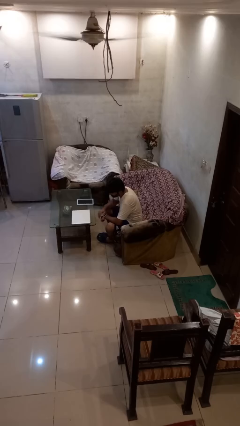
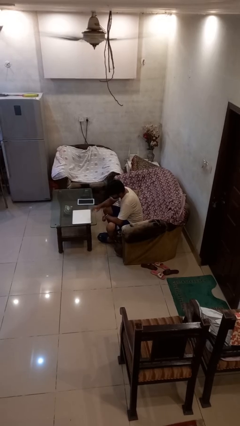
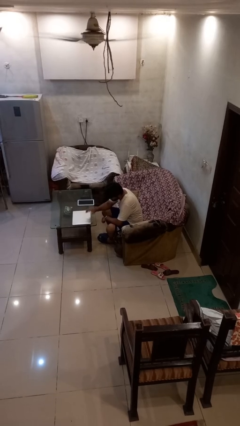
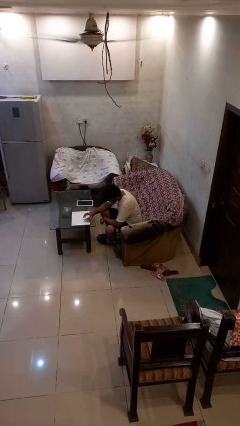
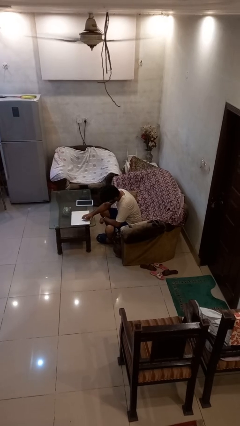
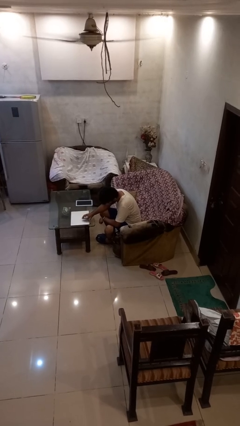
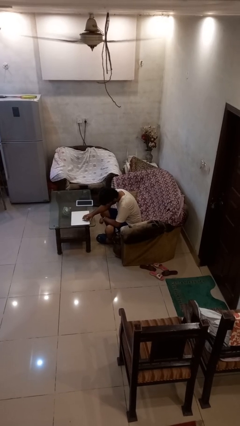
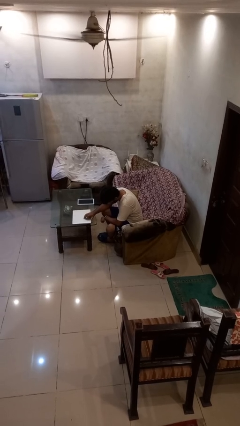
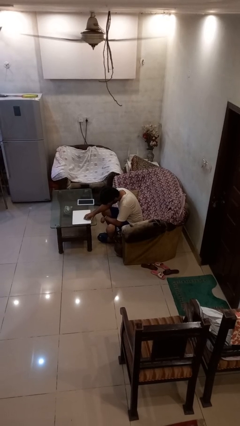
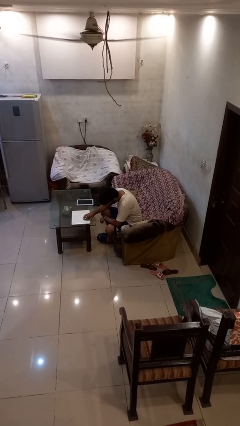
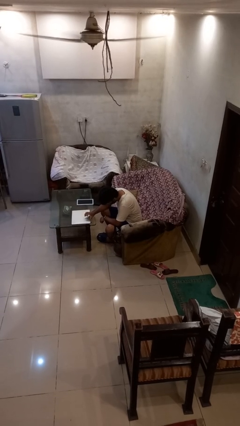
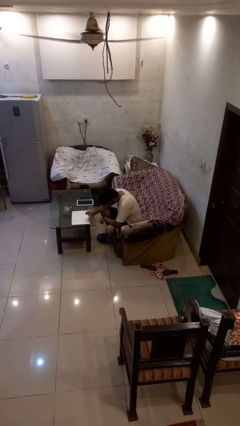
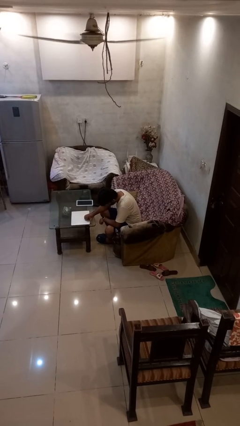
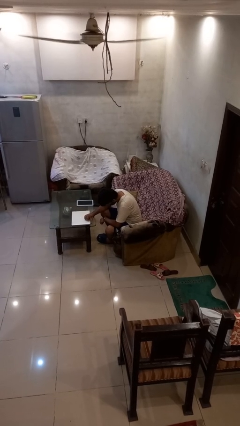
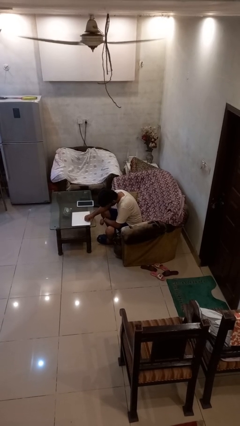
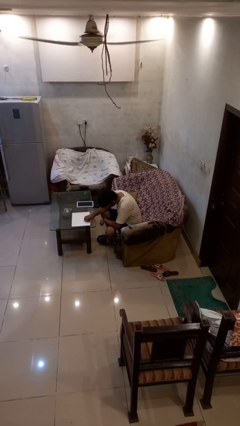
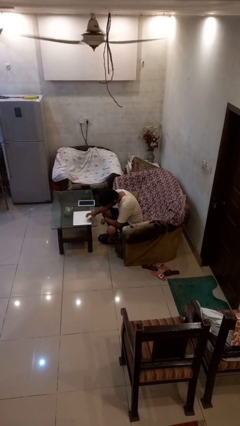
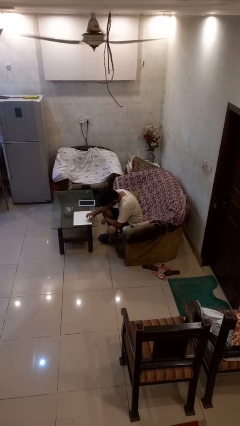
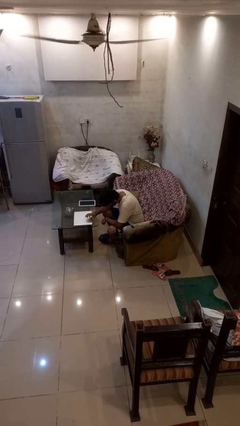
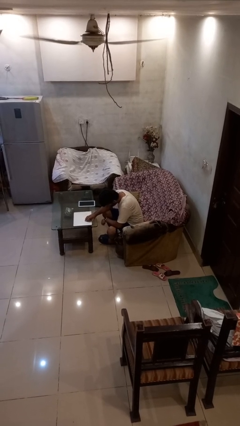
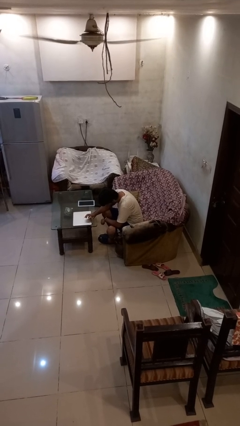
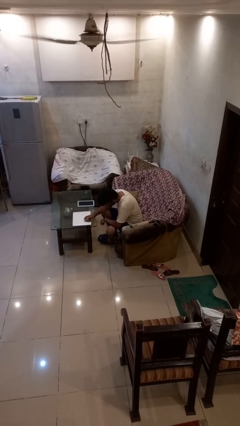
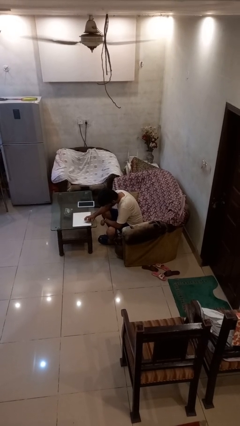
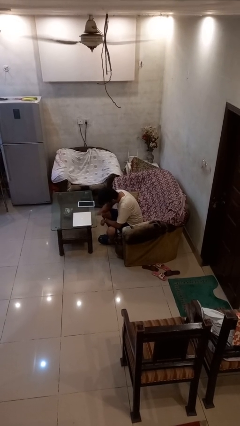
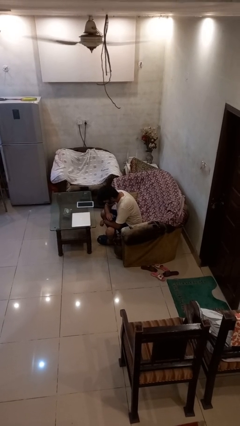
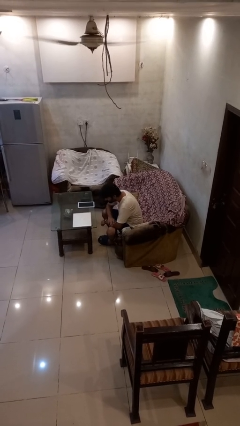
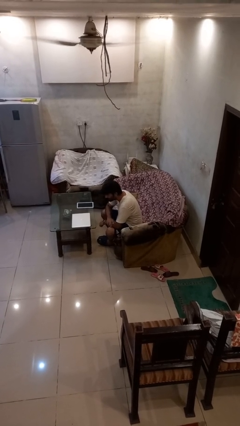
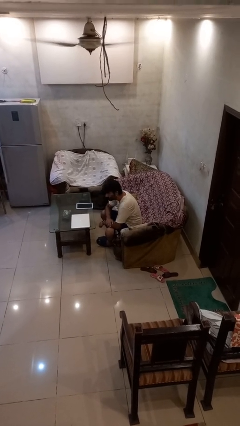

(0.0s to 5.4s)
person taps object with finger

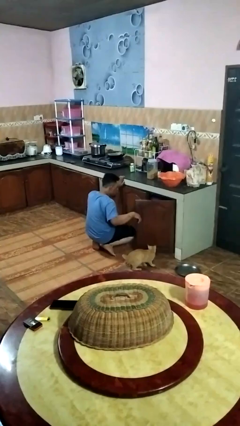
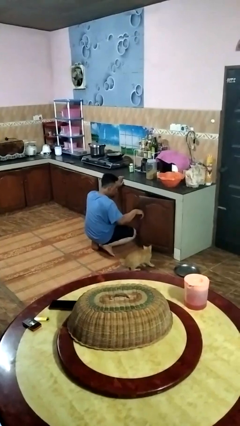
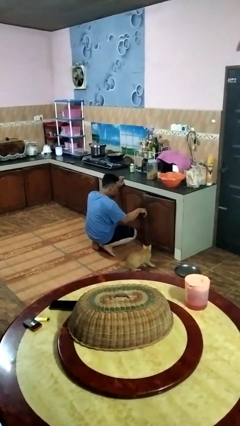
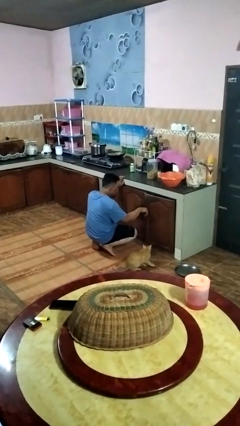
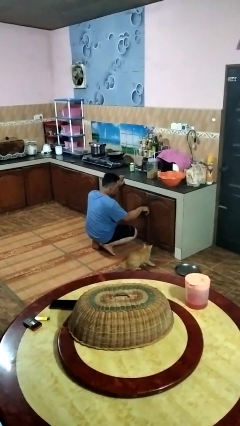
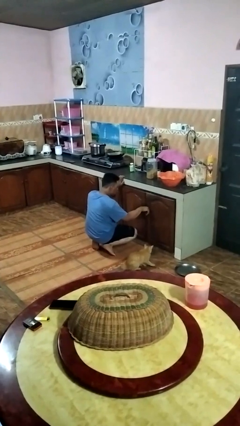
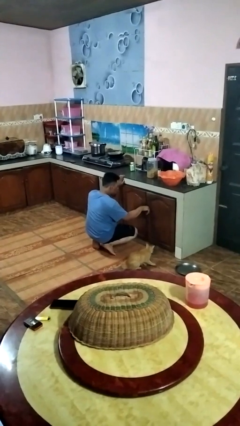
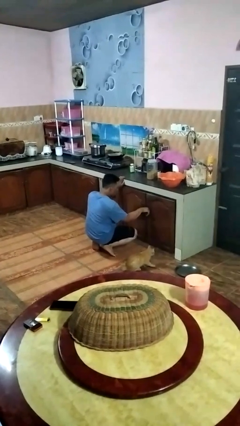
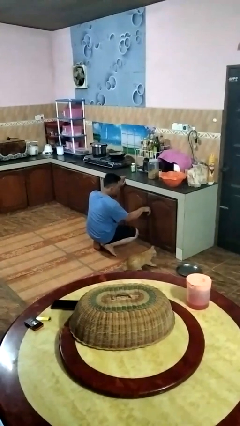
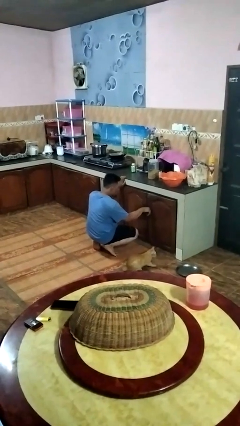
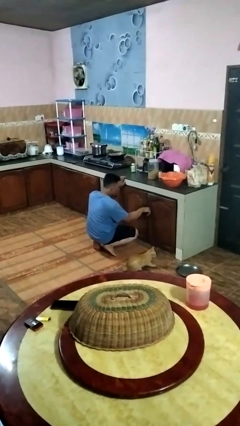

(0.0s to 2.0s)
person closes kitchen drawer

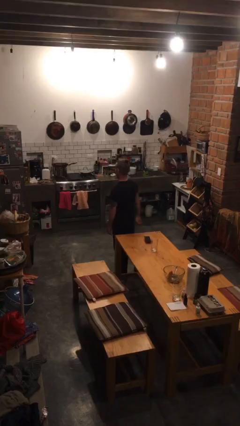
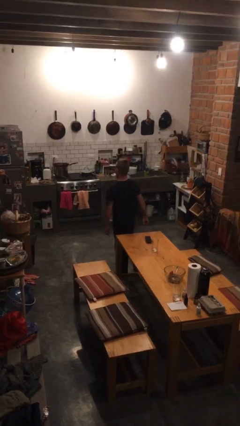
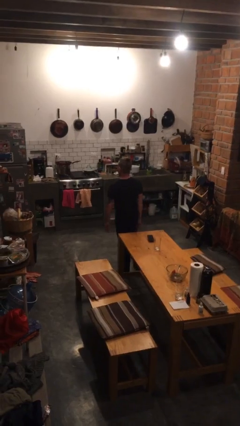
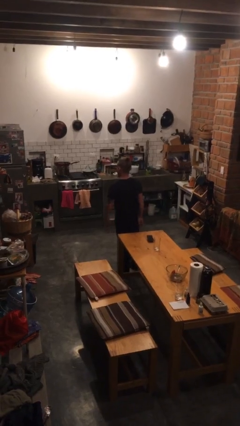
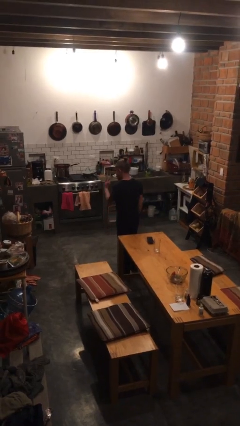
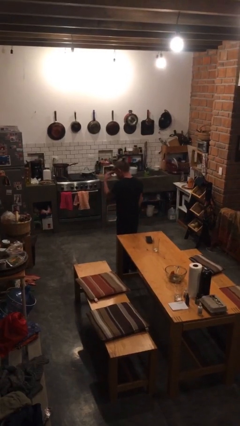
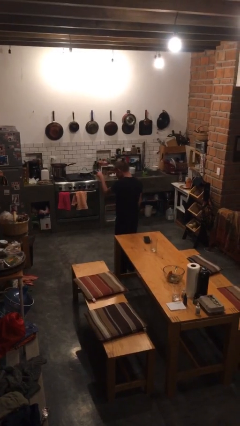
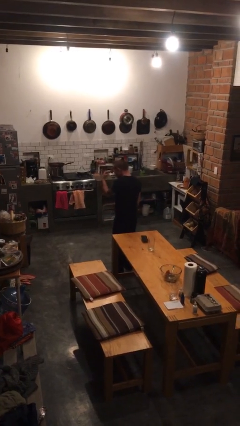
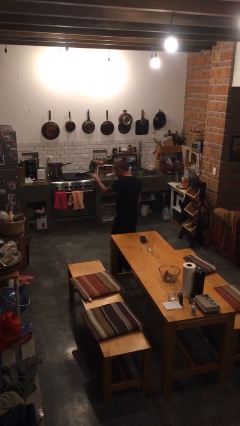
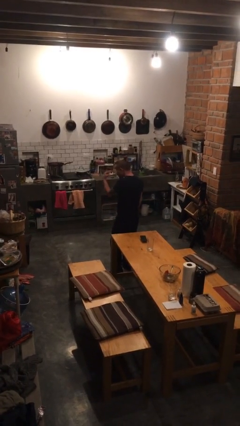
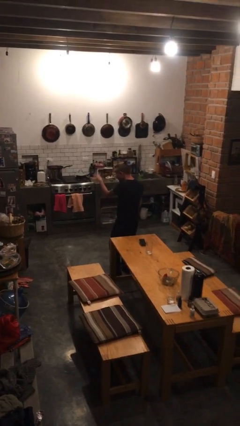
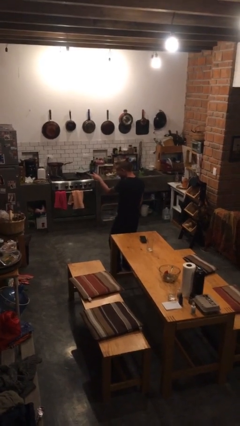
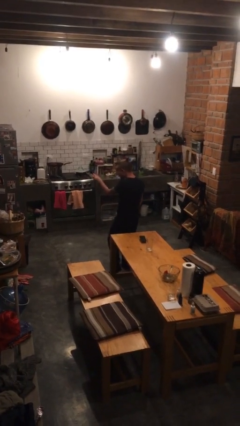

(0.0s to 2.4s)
person gestures watch closely

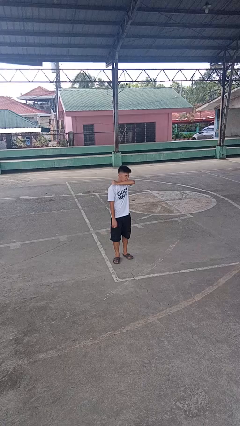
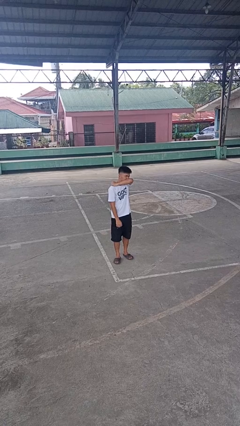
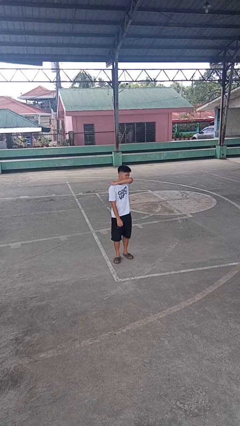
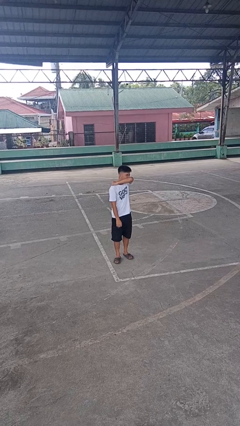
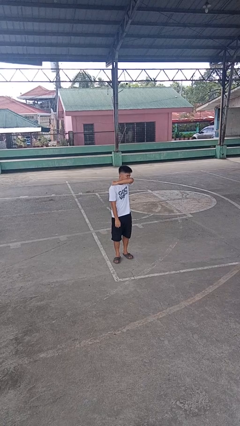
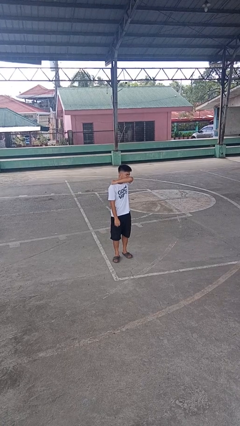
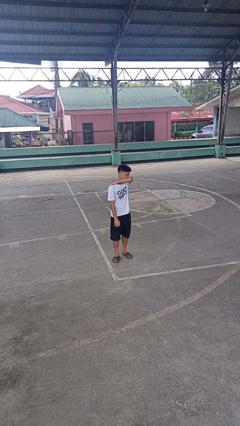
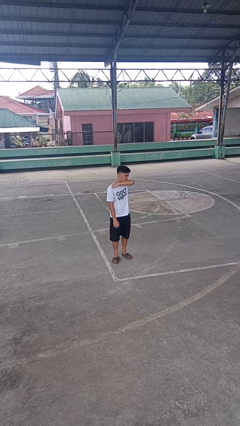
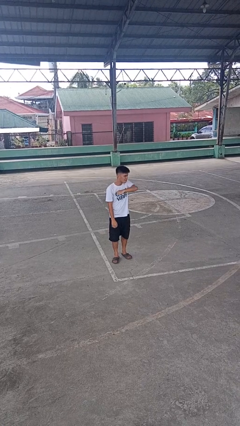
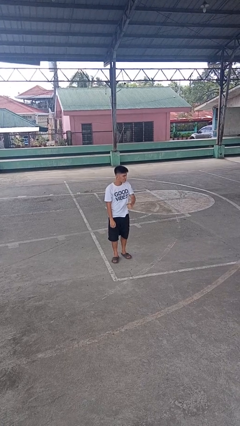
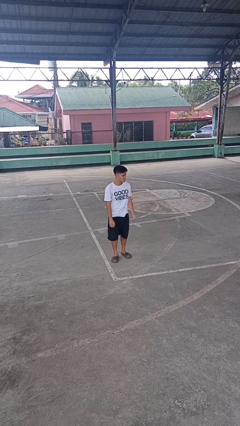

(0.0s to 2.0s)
person sneezes into arm

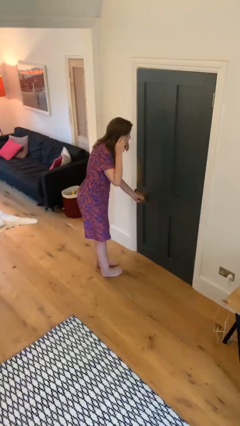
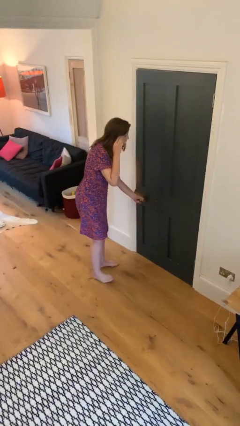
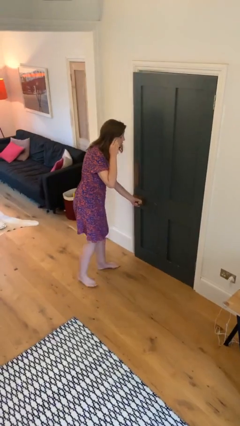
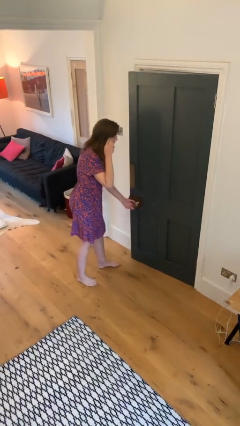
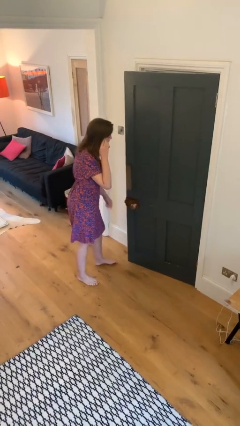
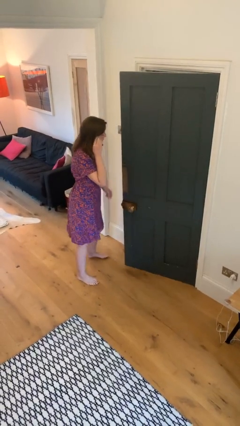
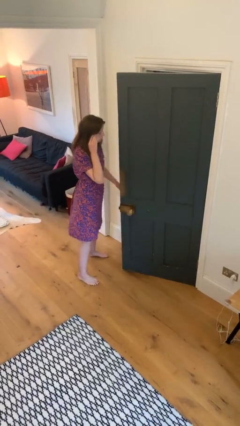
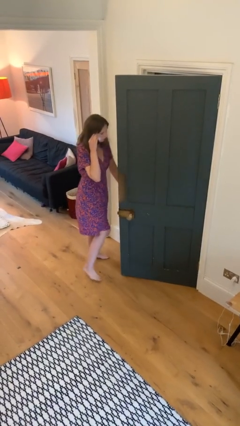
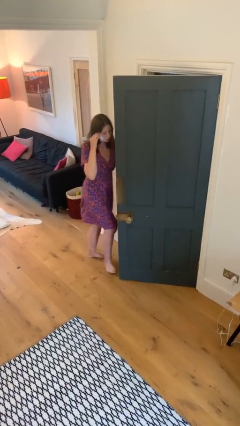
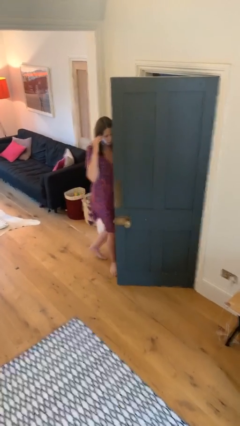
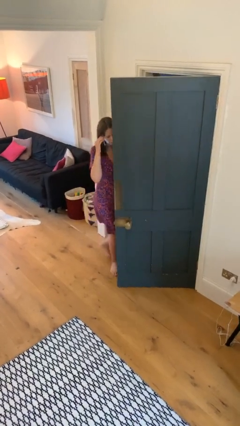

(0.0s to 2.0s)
person opens facility door

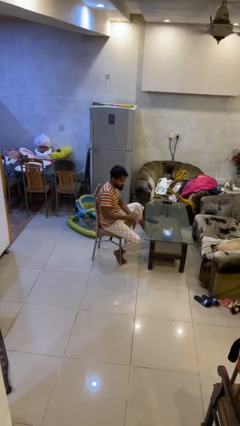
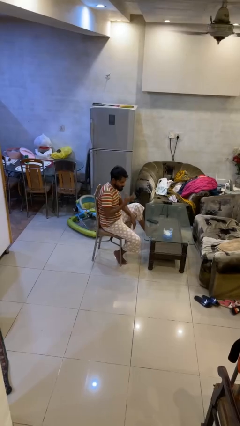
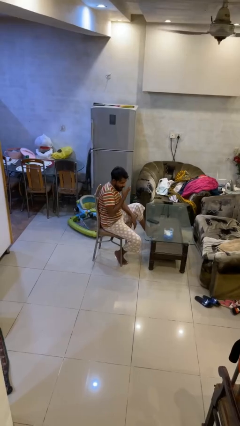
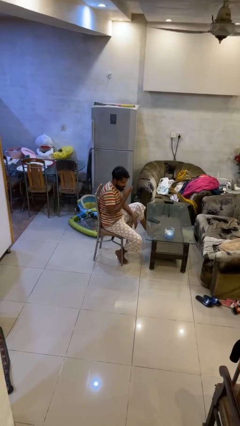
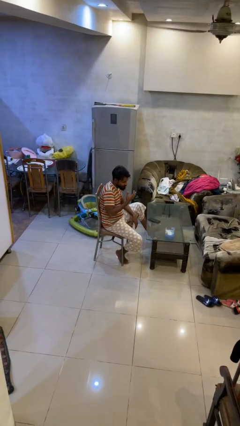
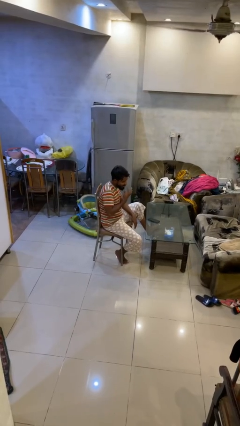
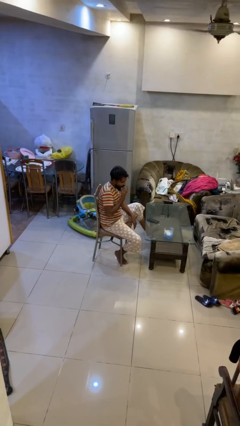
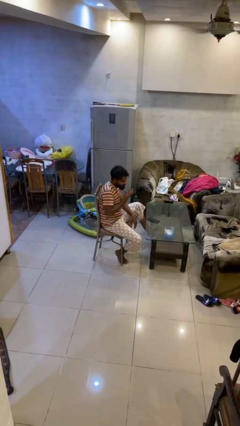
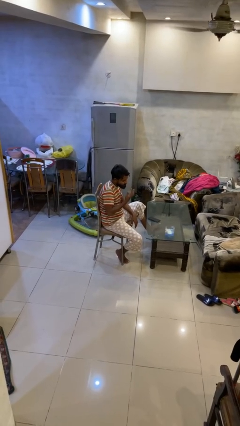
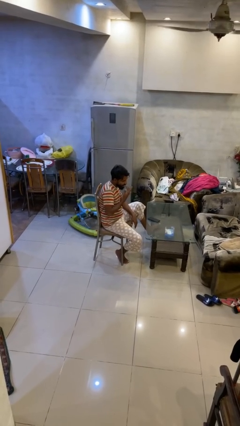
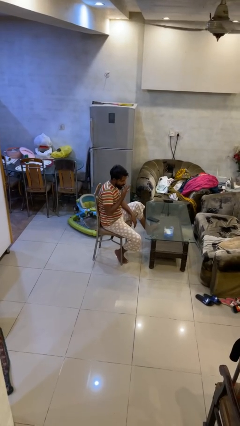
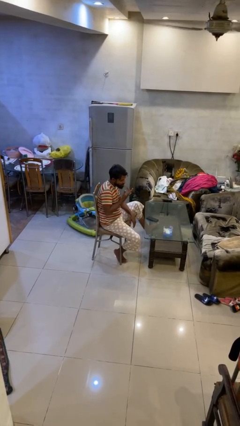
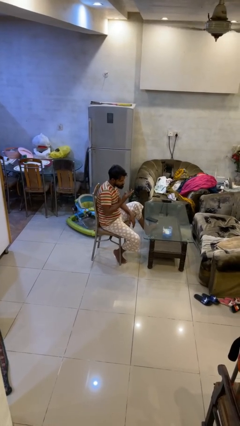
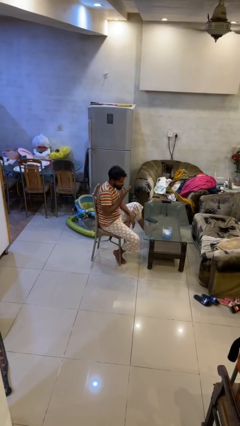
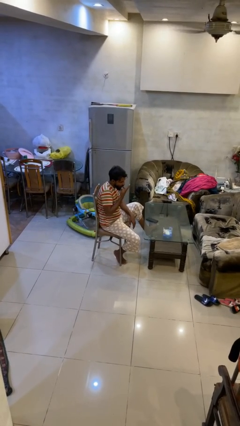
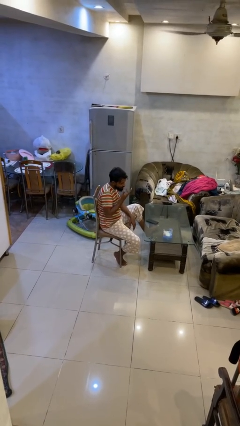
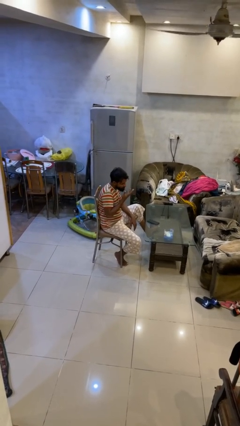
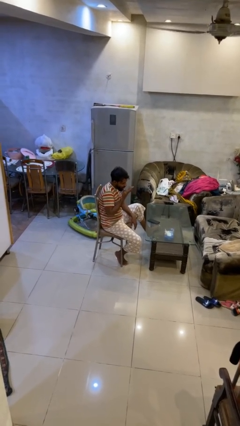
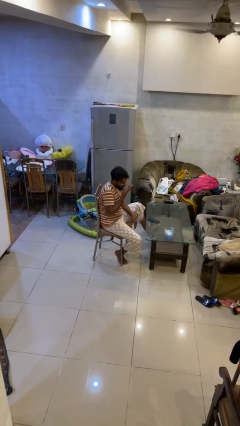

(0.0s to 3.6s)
person licks fingers

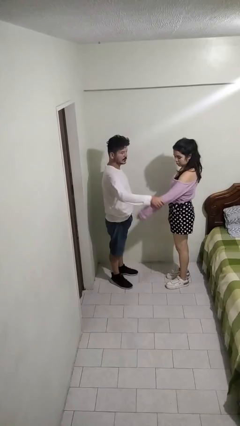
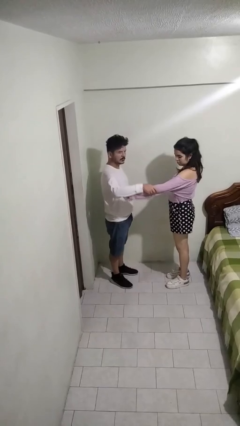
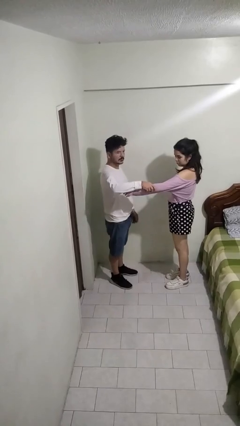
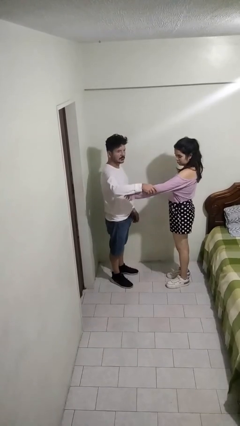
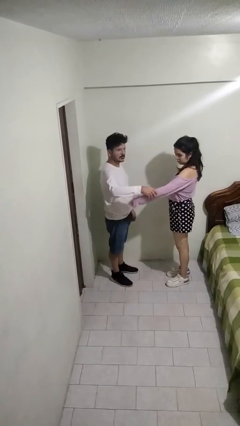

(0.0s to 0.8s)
person grabs person by forearm
